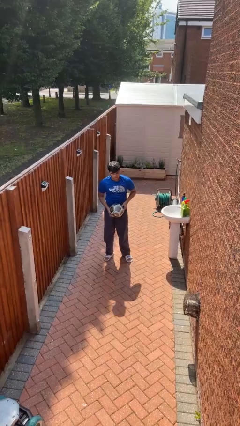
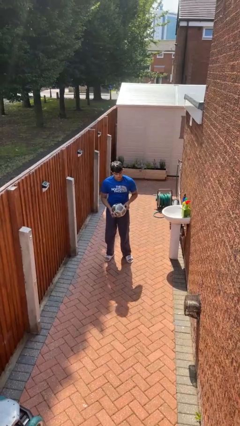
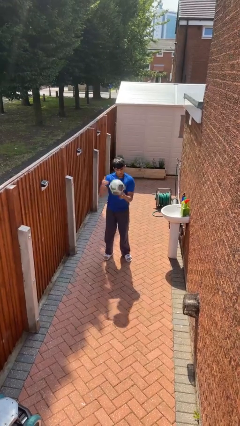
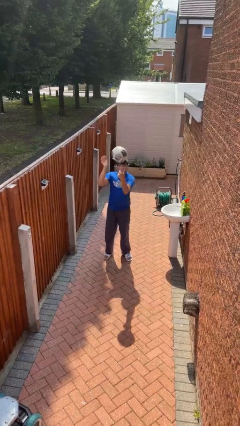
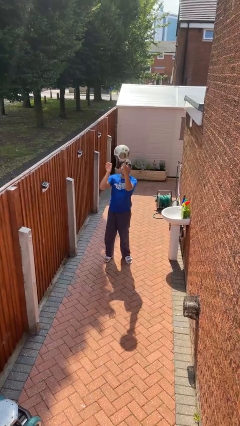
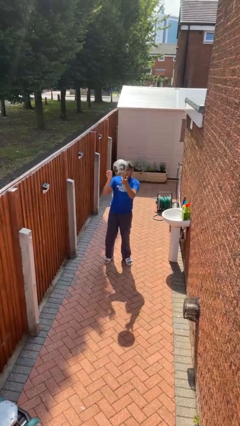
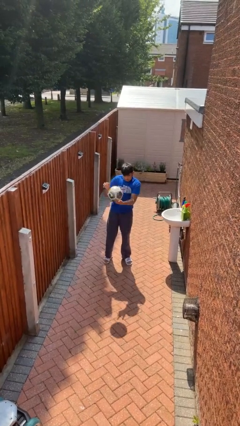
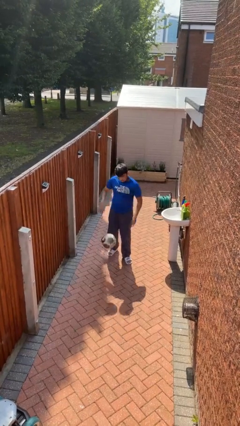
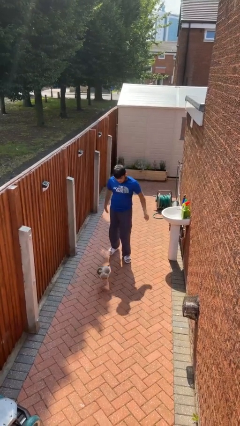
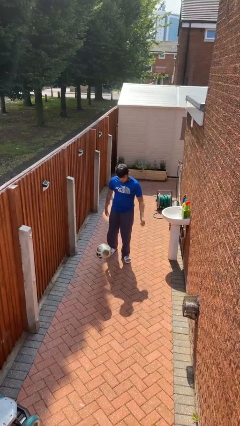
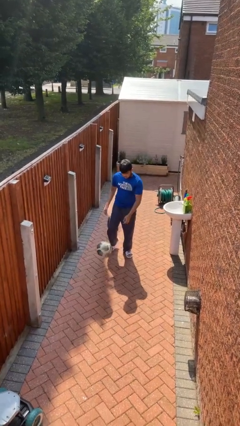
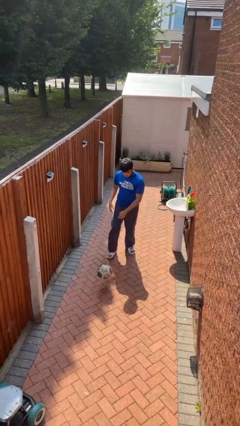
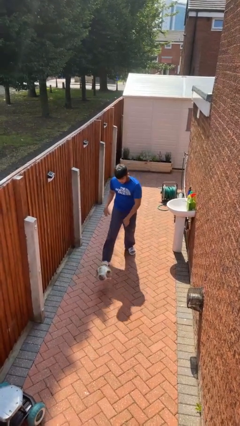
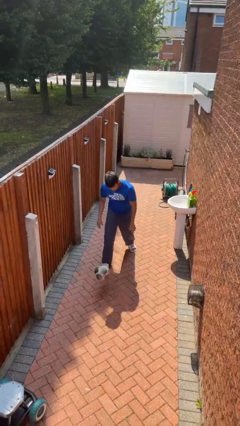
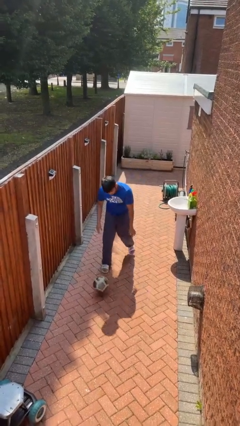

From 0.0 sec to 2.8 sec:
person drops object

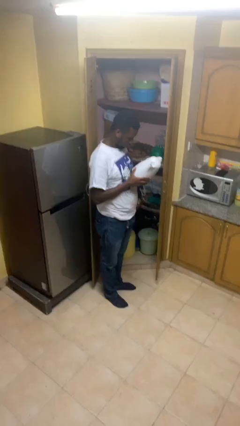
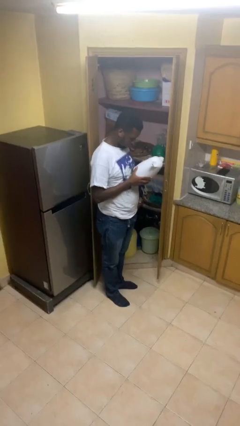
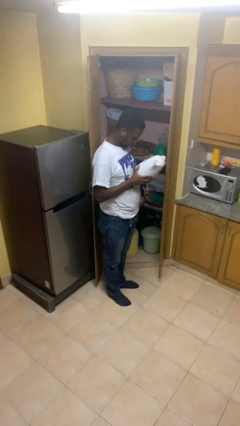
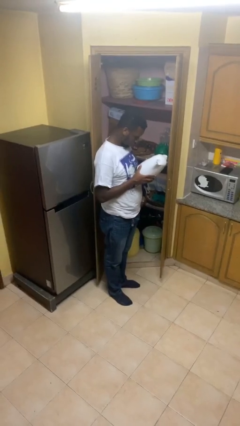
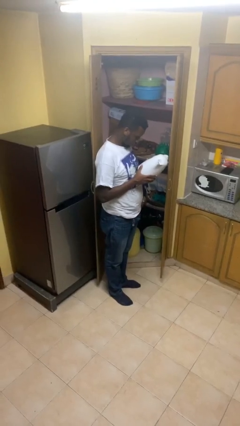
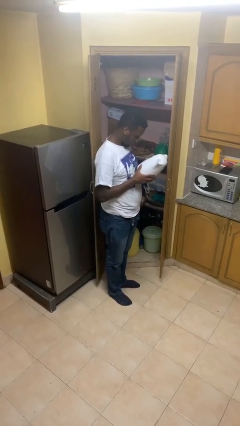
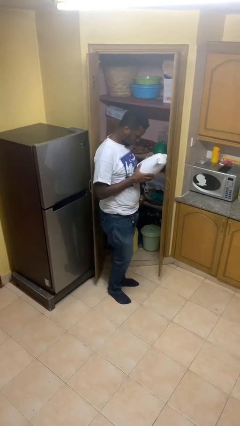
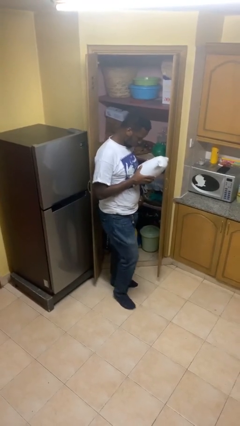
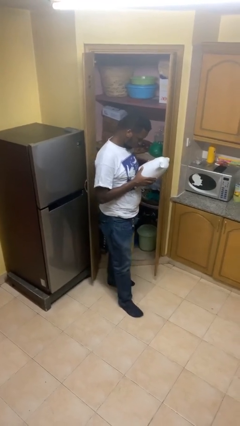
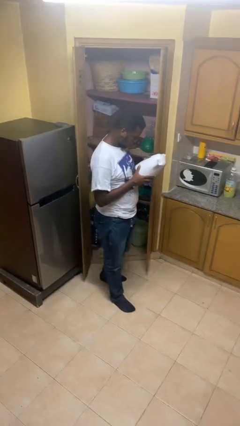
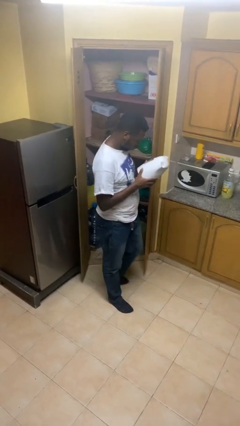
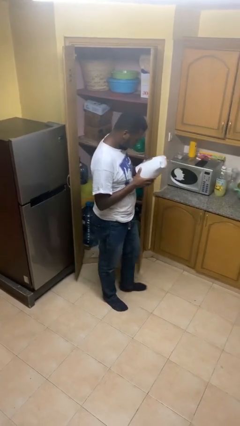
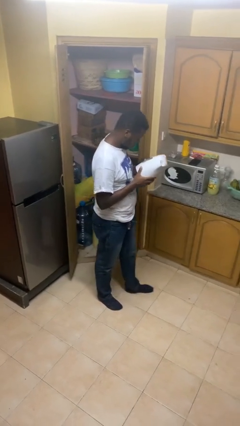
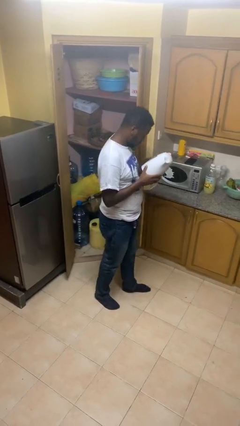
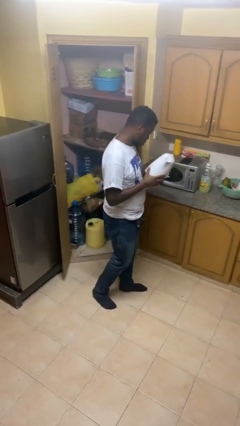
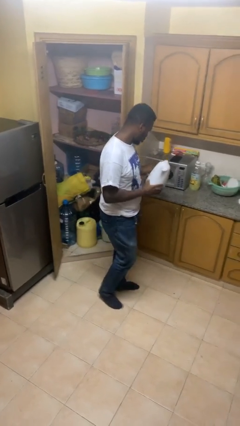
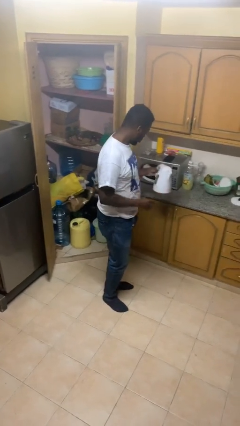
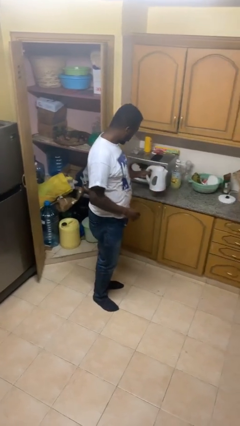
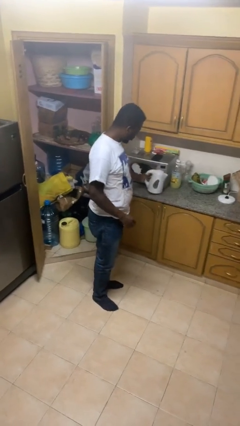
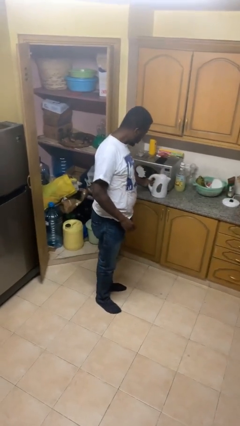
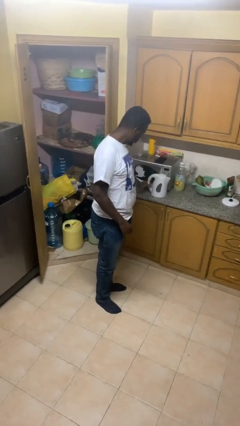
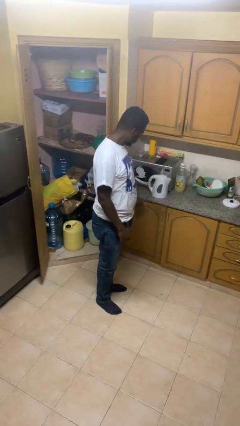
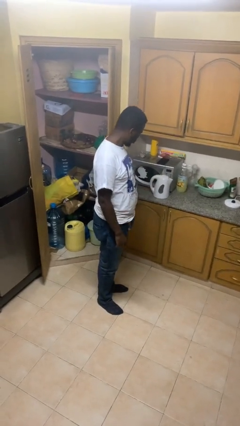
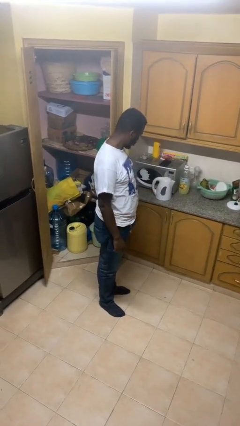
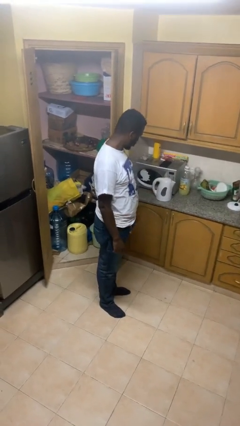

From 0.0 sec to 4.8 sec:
person puts down object on table

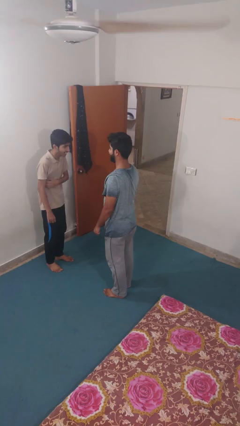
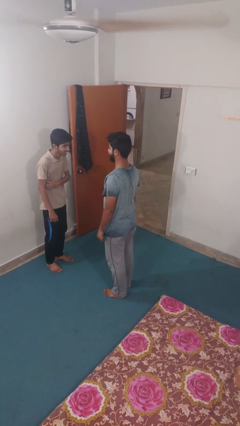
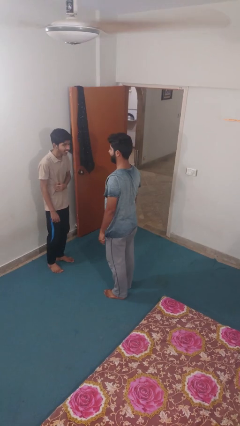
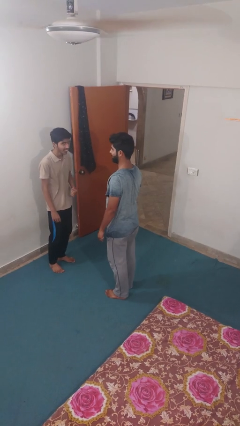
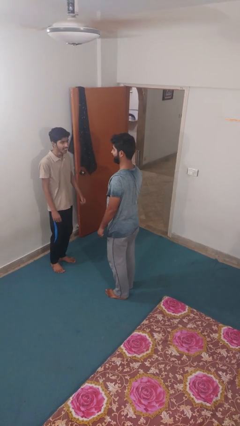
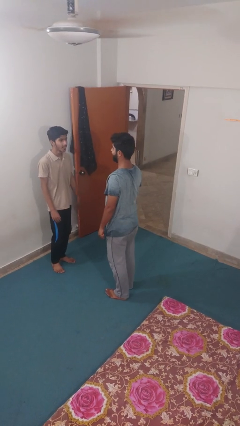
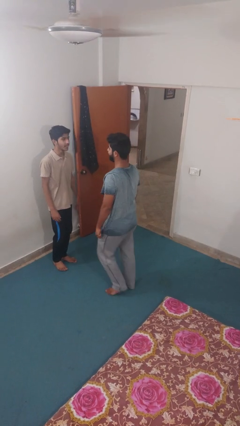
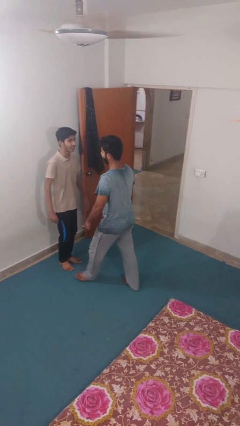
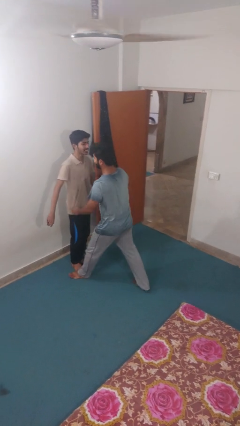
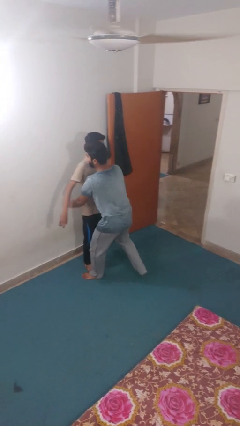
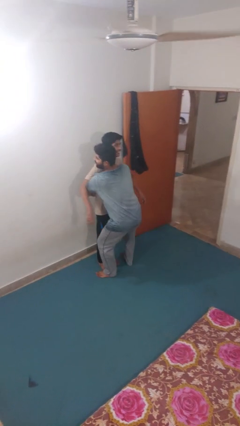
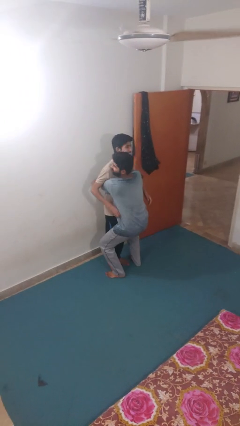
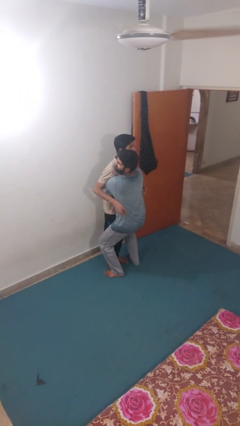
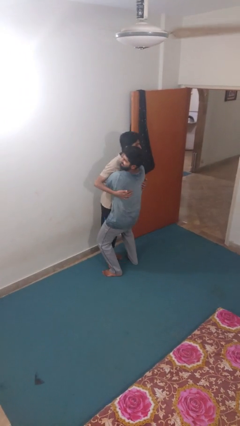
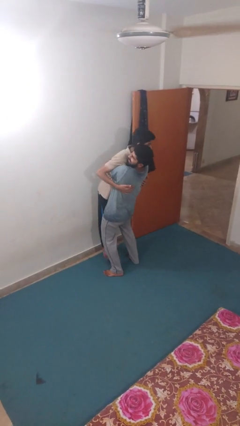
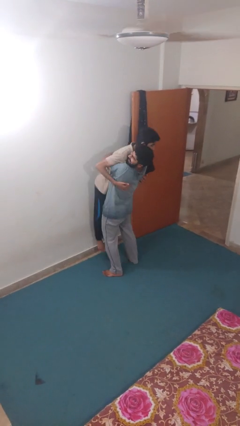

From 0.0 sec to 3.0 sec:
person picks up person

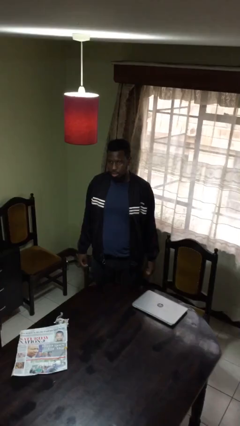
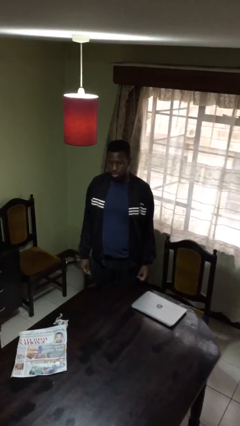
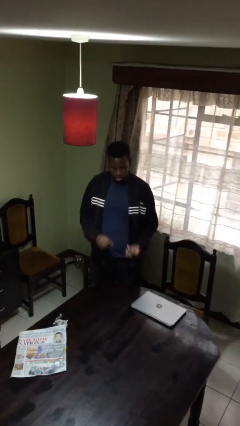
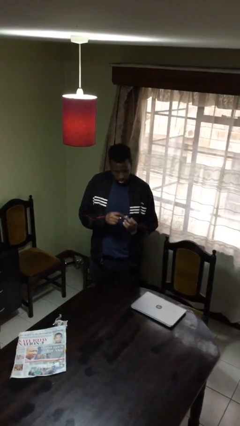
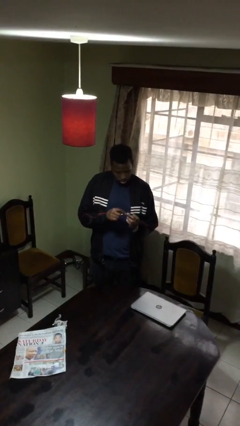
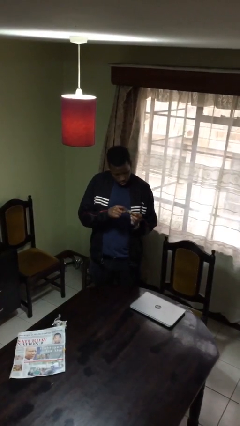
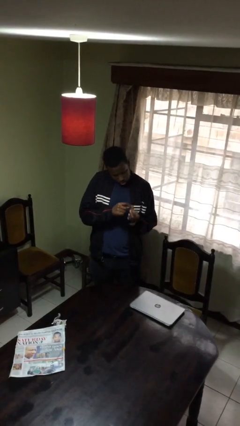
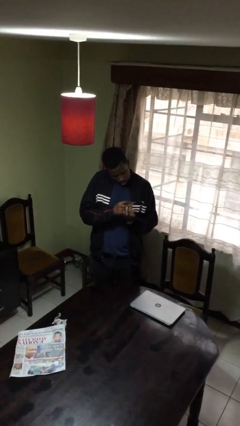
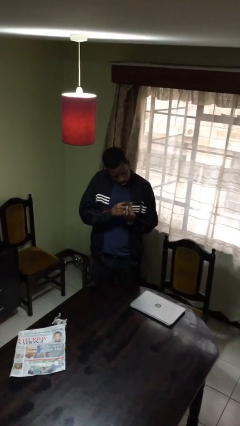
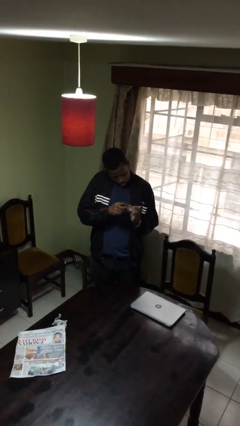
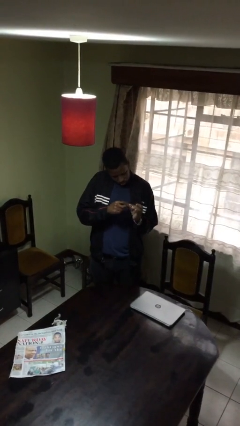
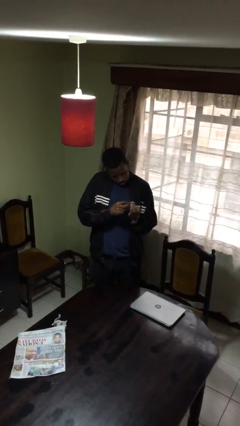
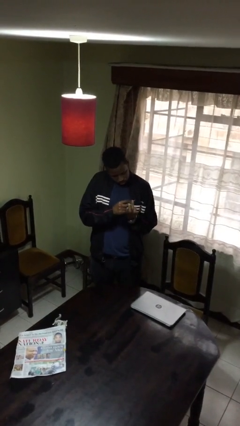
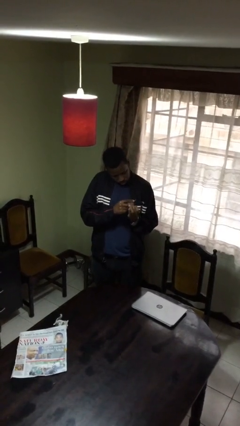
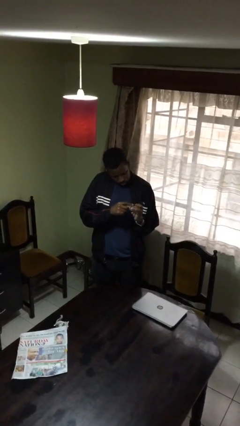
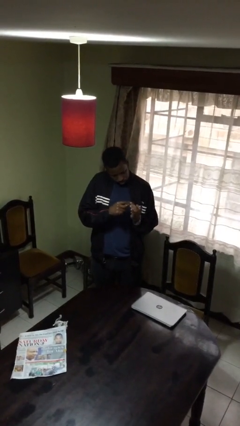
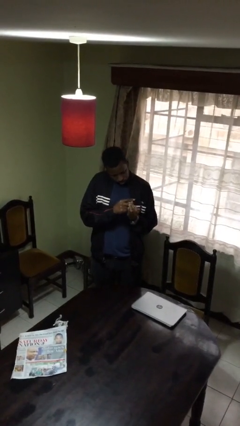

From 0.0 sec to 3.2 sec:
person files fingernails

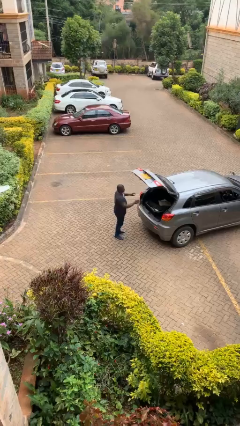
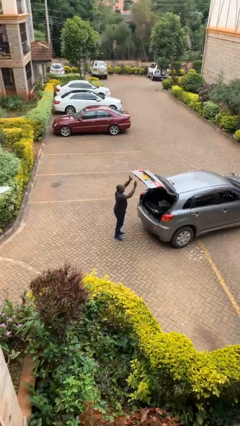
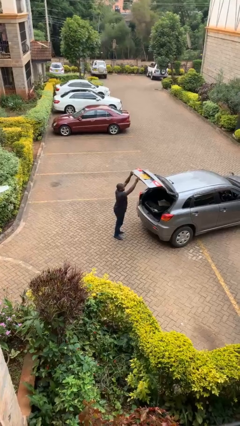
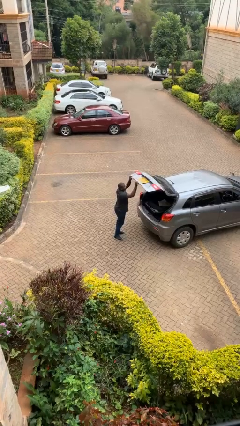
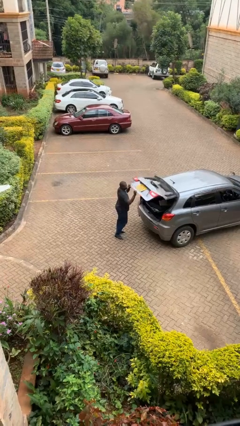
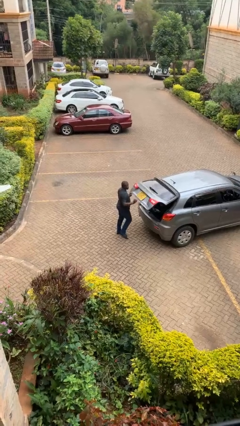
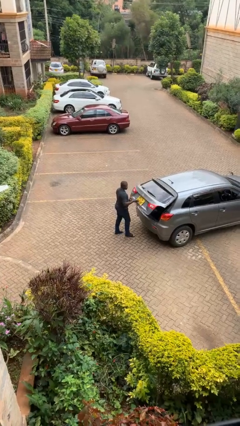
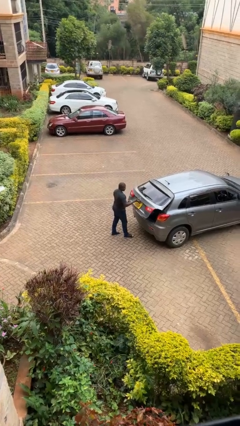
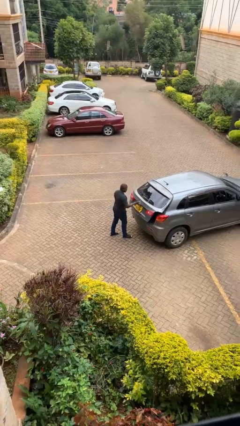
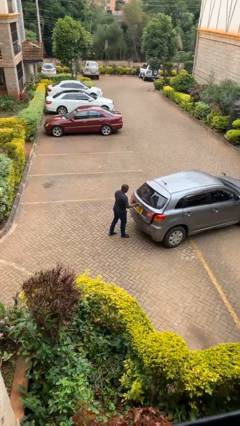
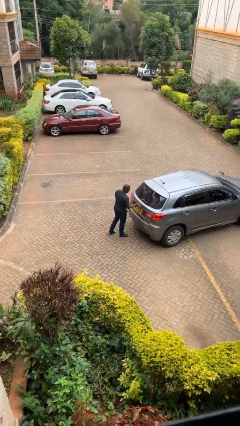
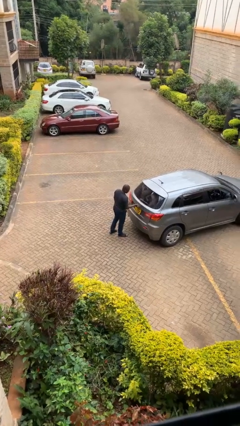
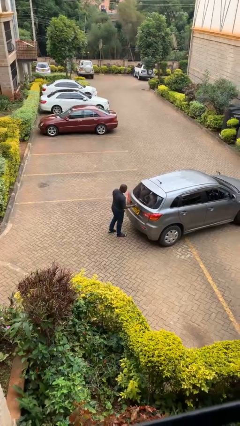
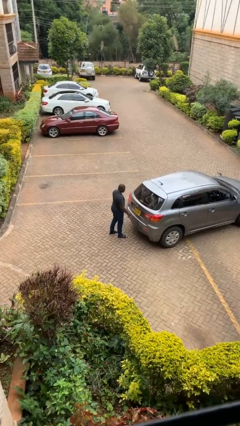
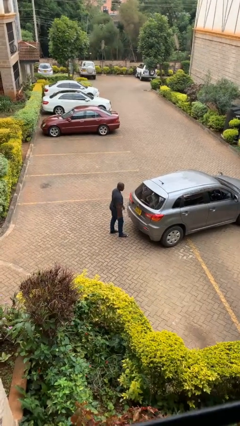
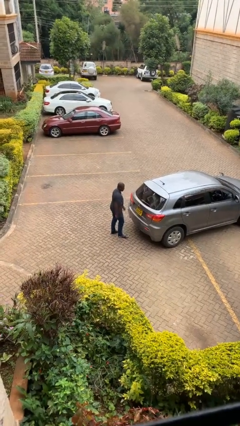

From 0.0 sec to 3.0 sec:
person closes car trunk

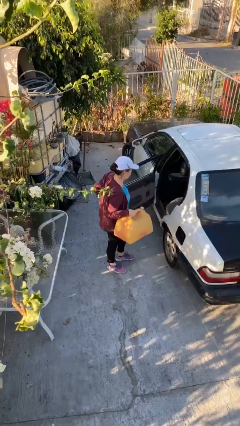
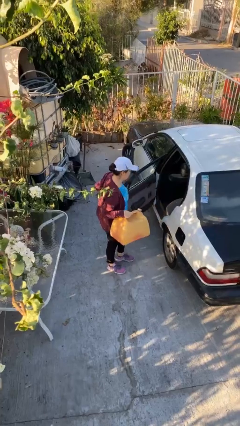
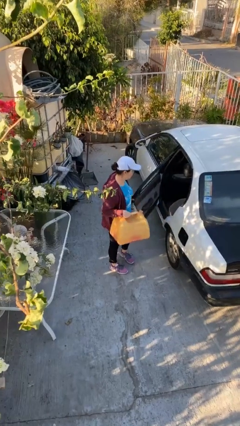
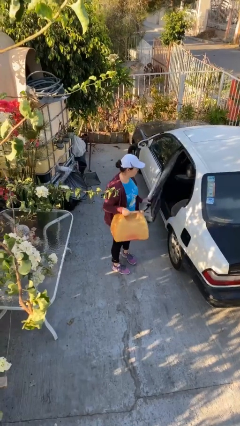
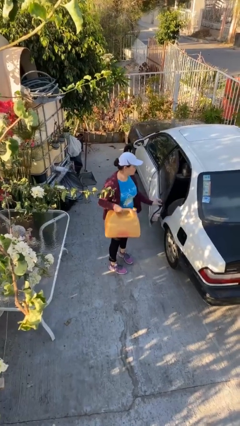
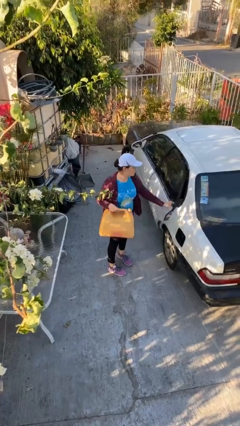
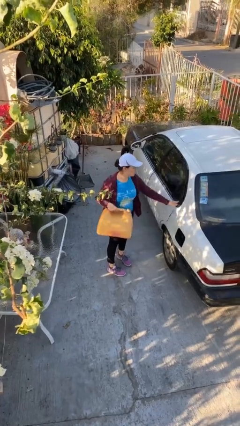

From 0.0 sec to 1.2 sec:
person closes car door
